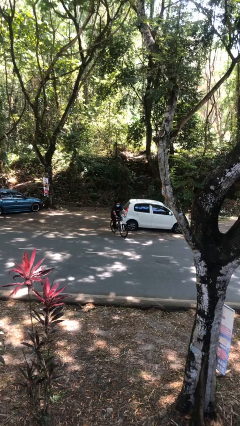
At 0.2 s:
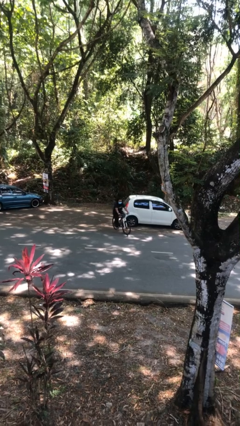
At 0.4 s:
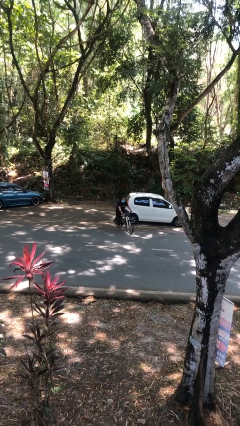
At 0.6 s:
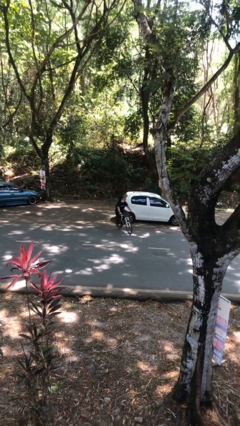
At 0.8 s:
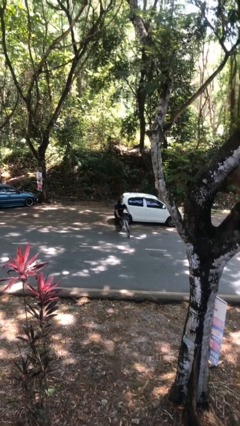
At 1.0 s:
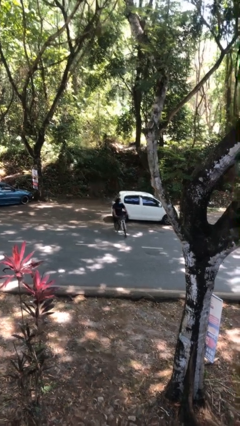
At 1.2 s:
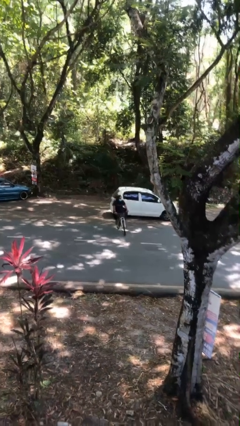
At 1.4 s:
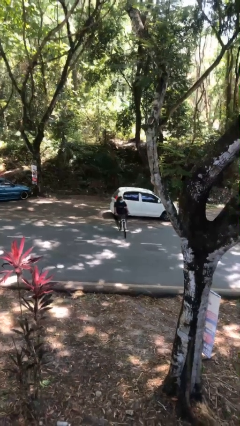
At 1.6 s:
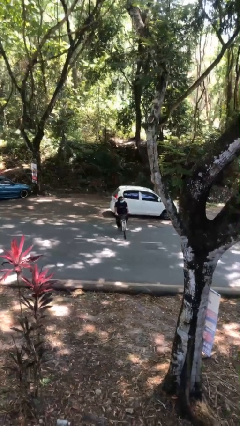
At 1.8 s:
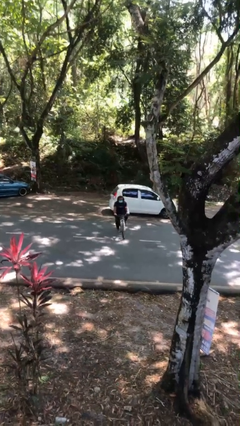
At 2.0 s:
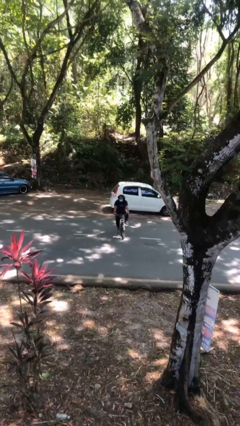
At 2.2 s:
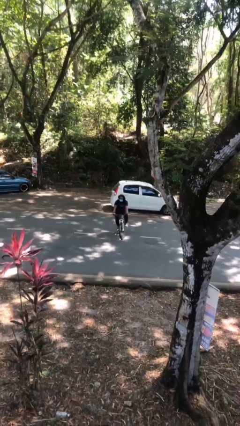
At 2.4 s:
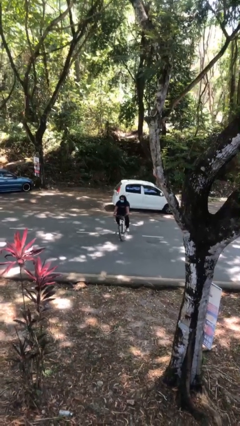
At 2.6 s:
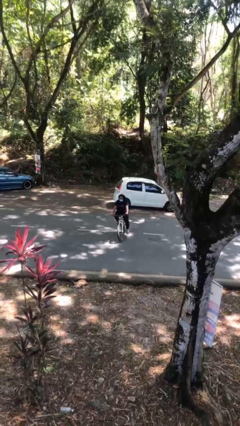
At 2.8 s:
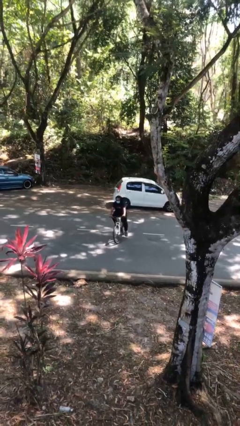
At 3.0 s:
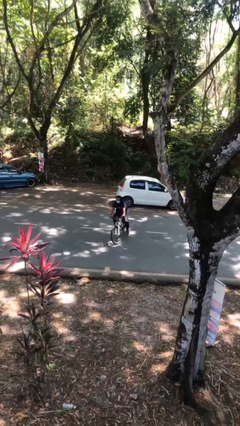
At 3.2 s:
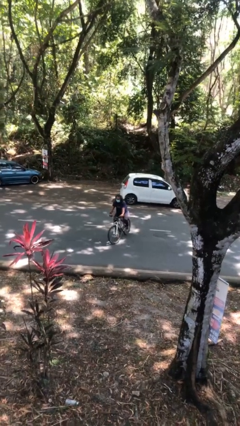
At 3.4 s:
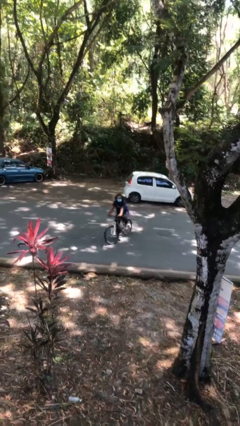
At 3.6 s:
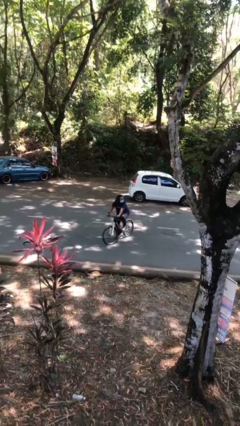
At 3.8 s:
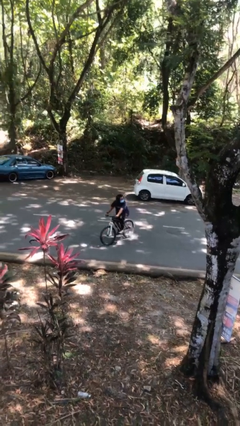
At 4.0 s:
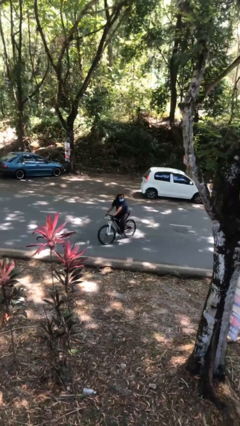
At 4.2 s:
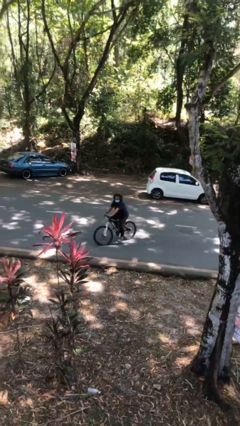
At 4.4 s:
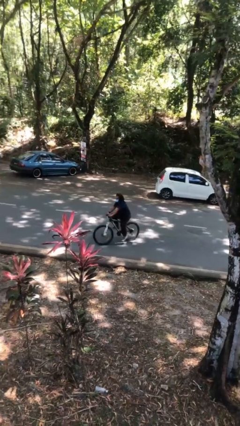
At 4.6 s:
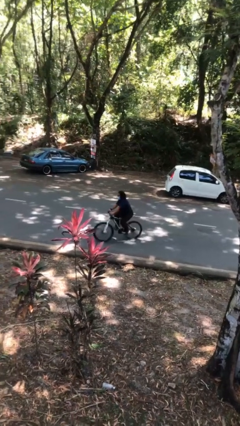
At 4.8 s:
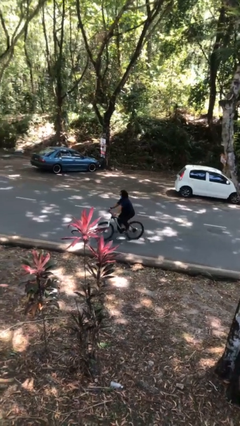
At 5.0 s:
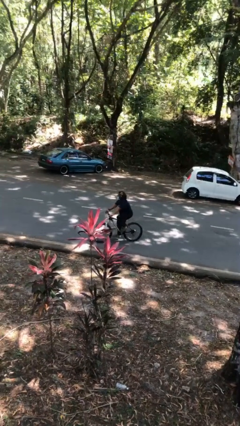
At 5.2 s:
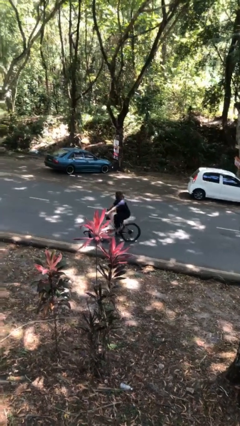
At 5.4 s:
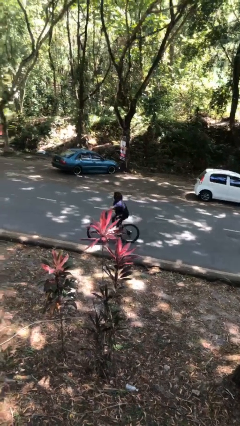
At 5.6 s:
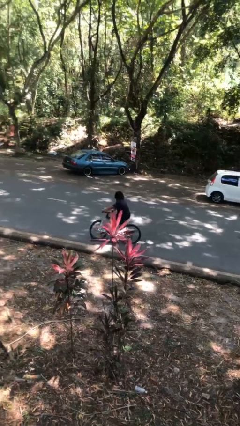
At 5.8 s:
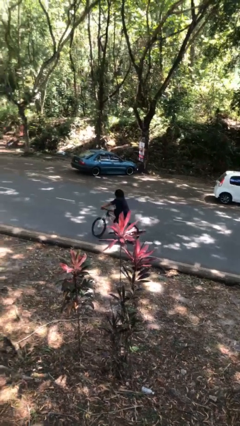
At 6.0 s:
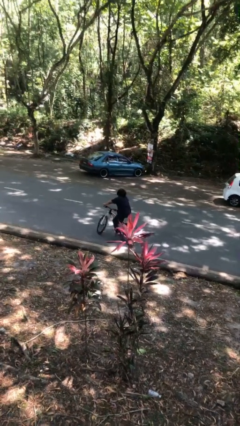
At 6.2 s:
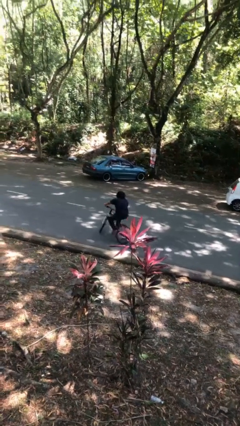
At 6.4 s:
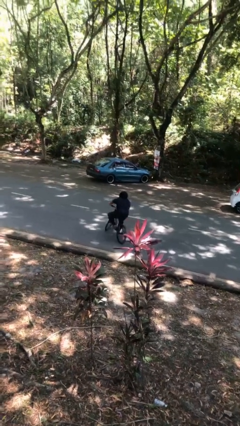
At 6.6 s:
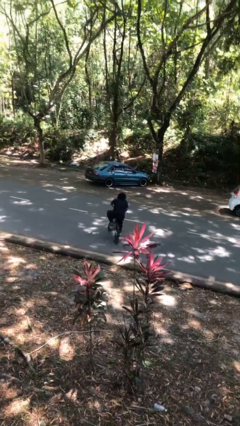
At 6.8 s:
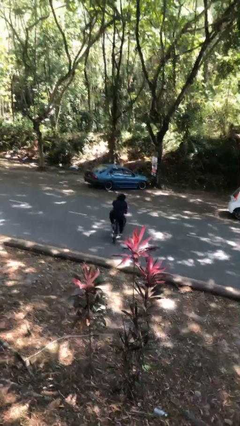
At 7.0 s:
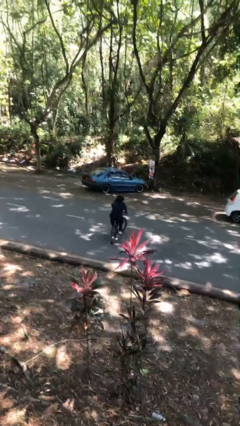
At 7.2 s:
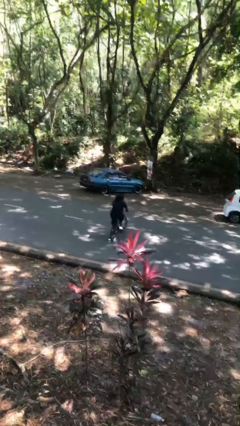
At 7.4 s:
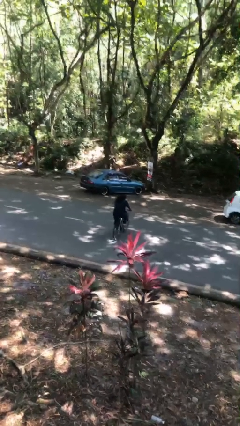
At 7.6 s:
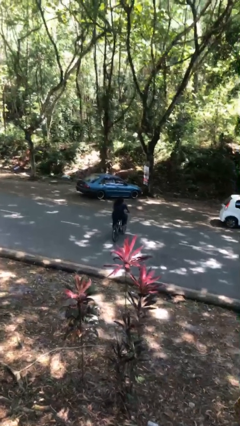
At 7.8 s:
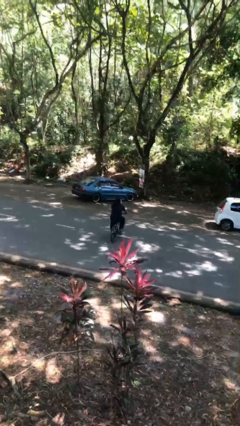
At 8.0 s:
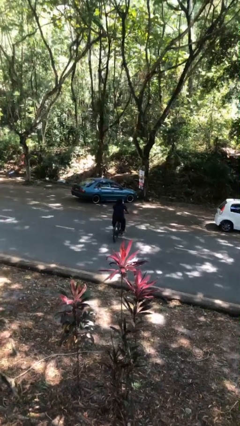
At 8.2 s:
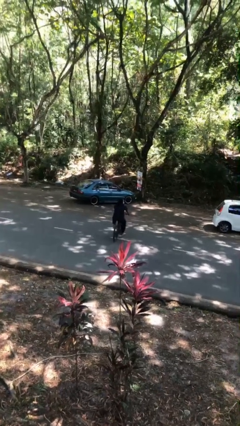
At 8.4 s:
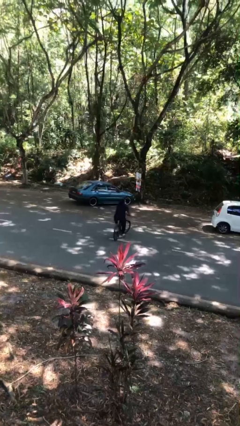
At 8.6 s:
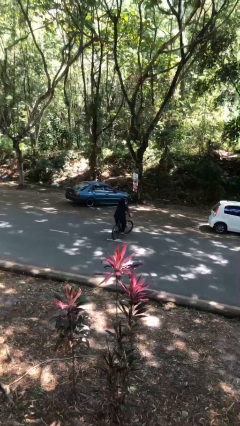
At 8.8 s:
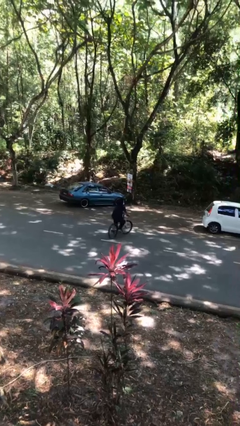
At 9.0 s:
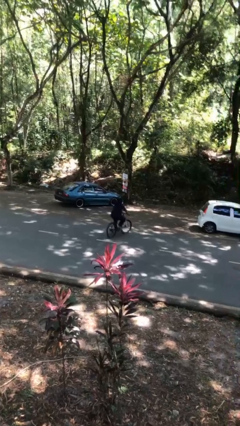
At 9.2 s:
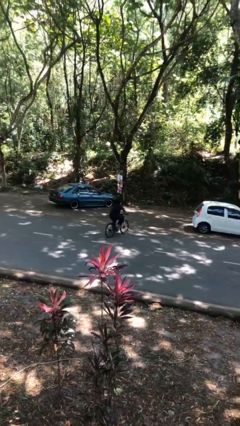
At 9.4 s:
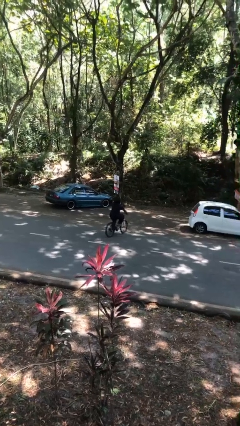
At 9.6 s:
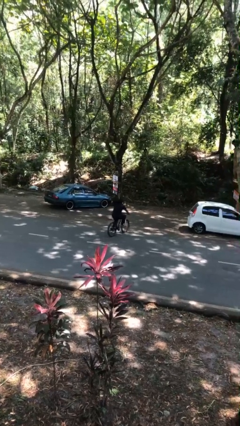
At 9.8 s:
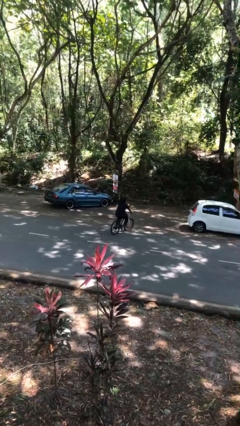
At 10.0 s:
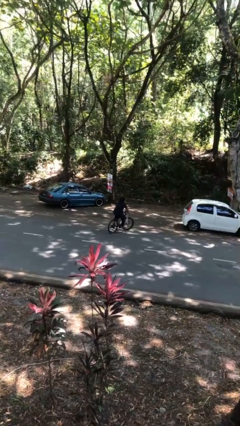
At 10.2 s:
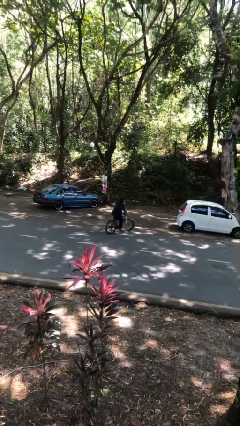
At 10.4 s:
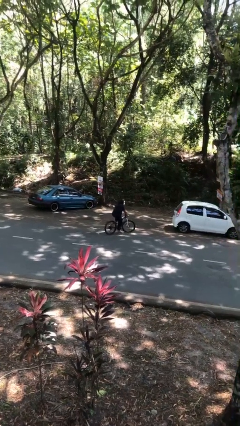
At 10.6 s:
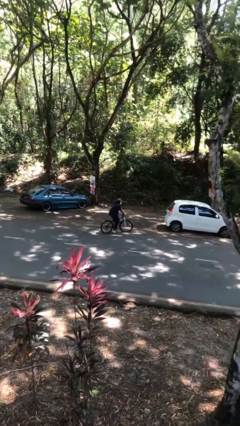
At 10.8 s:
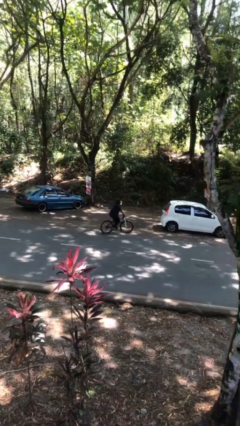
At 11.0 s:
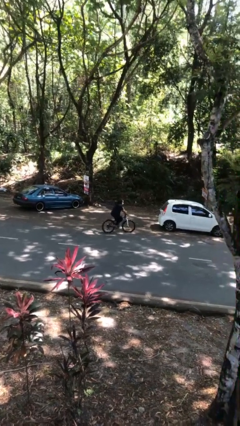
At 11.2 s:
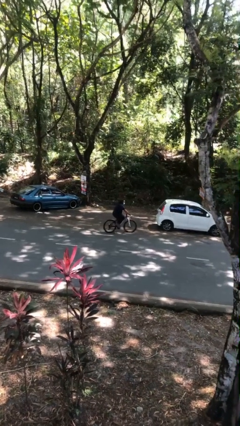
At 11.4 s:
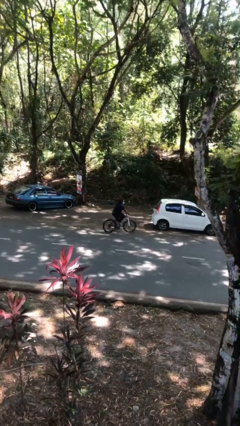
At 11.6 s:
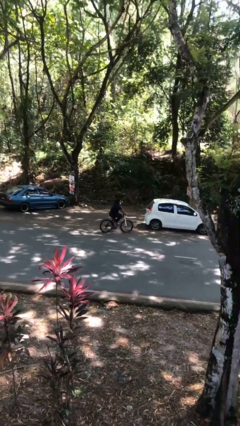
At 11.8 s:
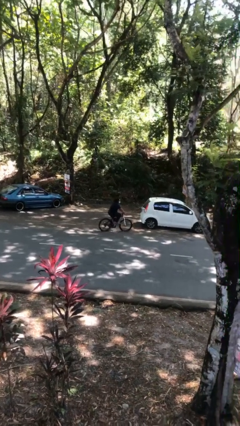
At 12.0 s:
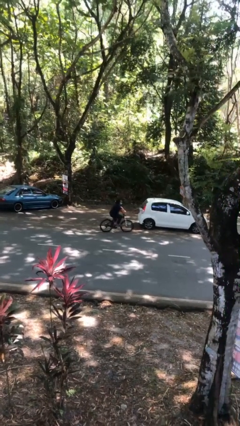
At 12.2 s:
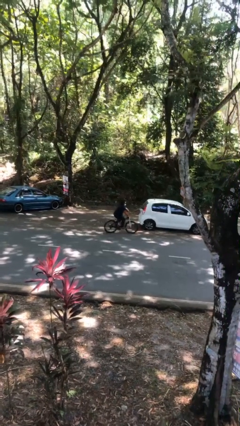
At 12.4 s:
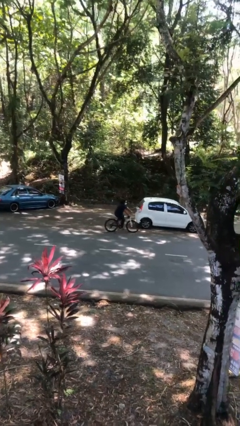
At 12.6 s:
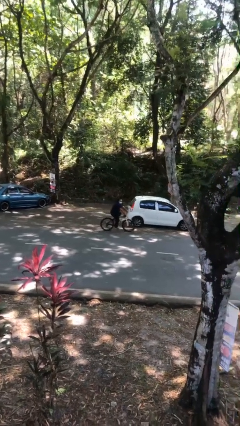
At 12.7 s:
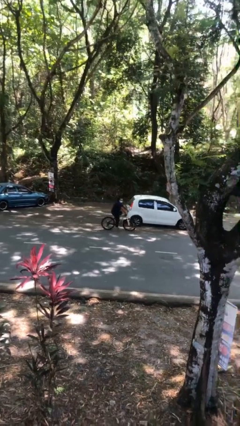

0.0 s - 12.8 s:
person rides bicycle

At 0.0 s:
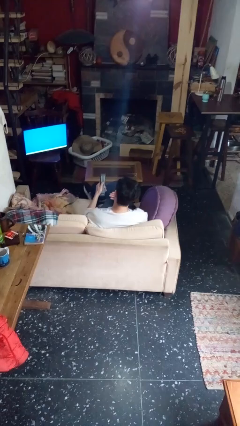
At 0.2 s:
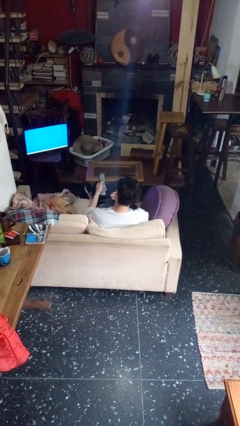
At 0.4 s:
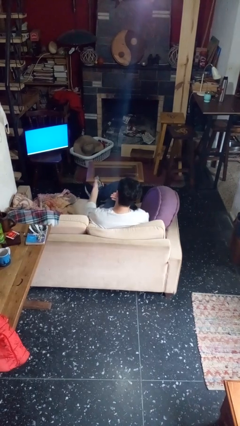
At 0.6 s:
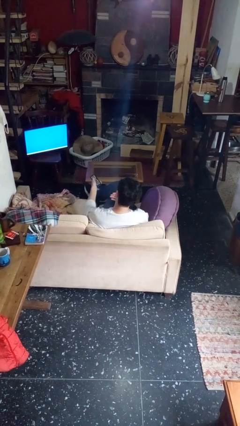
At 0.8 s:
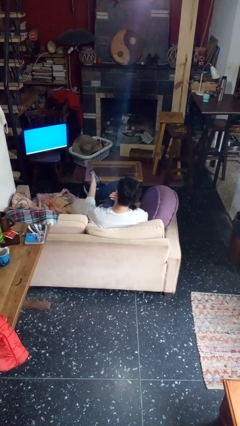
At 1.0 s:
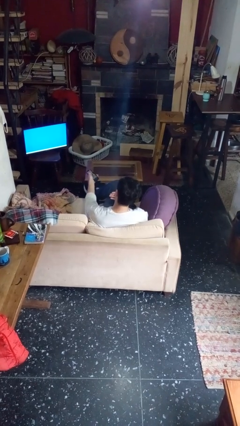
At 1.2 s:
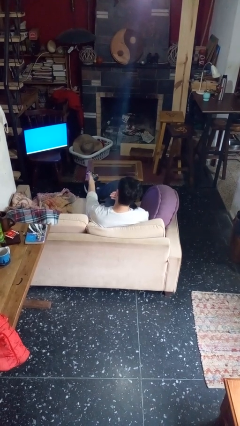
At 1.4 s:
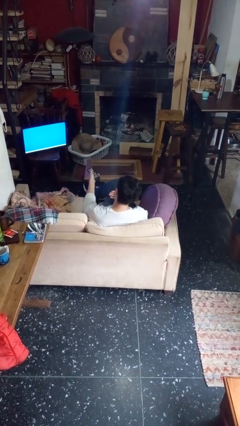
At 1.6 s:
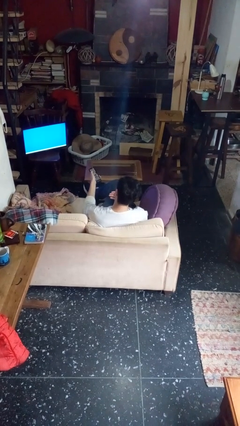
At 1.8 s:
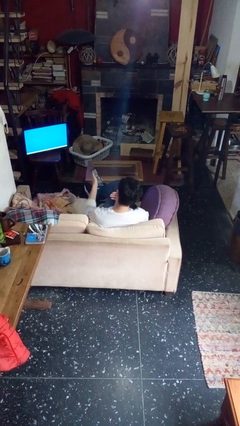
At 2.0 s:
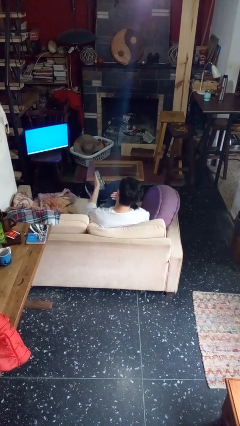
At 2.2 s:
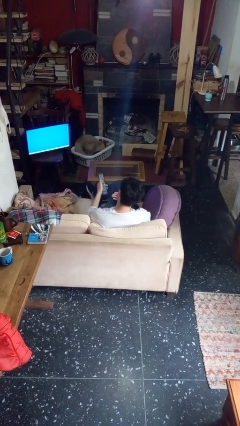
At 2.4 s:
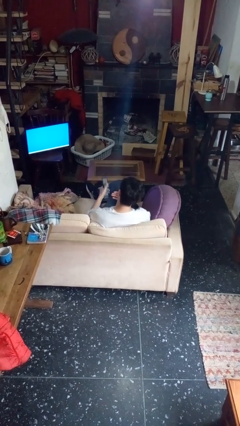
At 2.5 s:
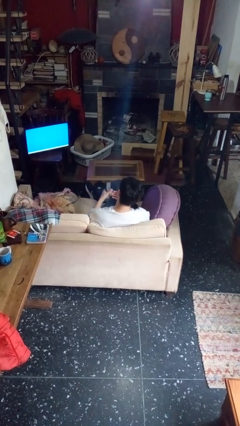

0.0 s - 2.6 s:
person uses television remote

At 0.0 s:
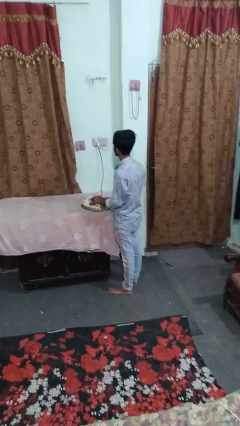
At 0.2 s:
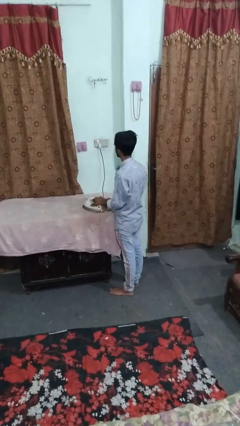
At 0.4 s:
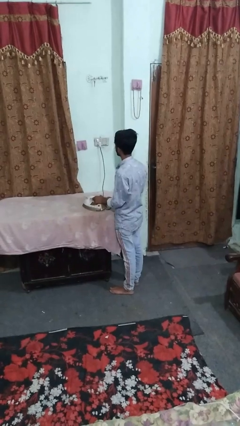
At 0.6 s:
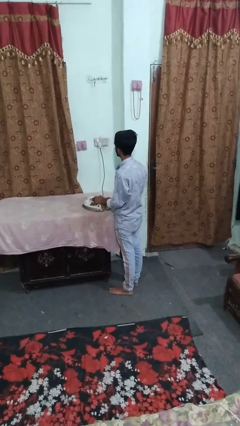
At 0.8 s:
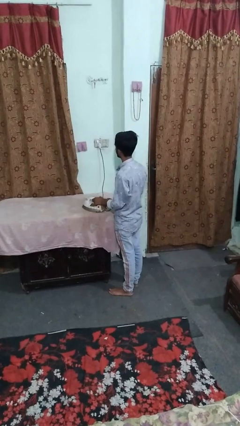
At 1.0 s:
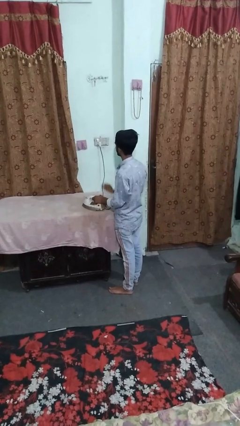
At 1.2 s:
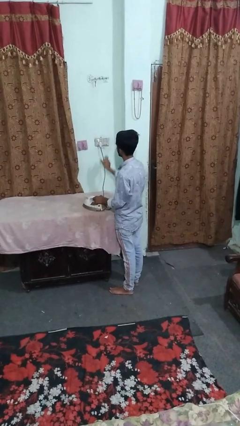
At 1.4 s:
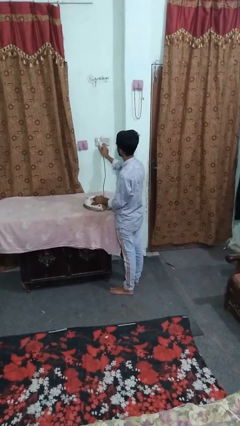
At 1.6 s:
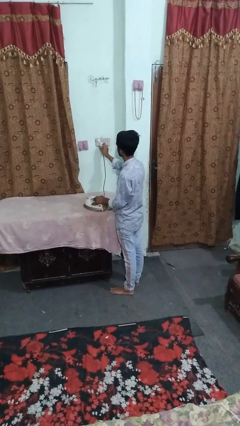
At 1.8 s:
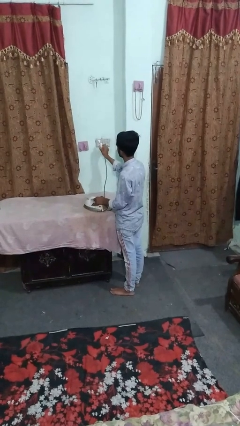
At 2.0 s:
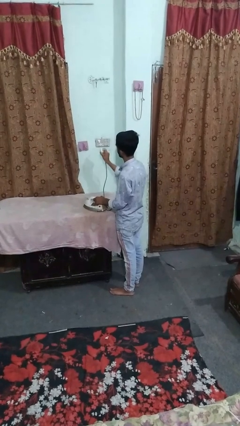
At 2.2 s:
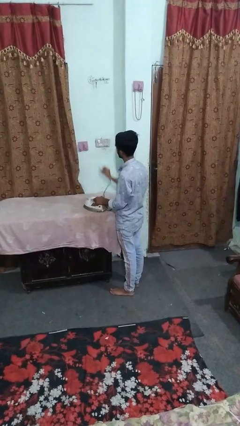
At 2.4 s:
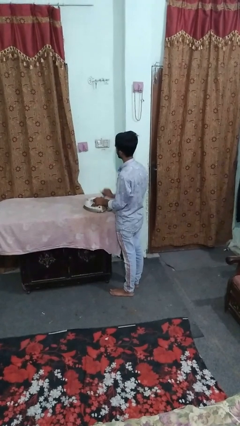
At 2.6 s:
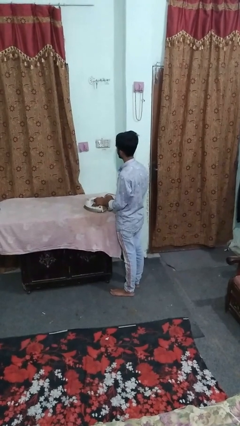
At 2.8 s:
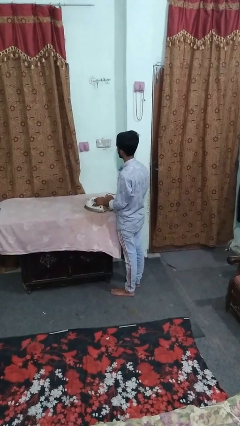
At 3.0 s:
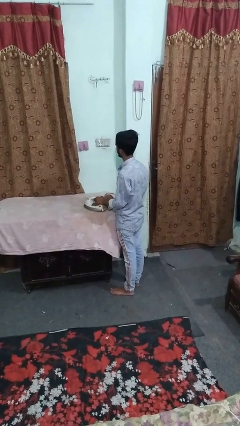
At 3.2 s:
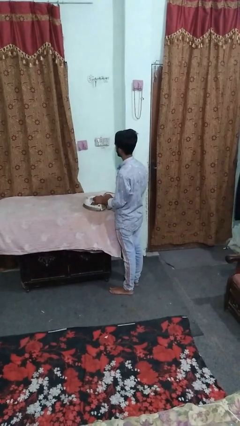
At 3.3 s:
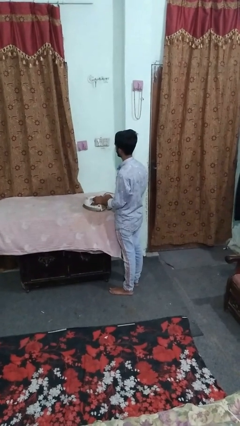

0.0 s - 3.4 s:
person unplugs from electrical socket
